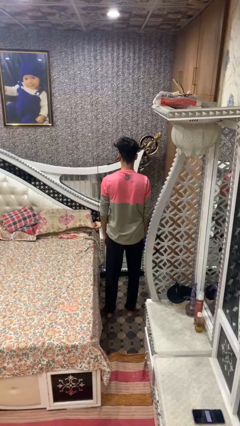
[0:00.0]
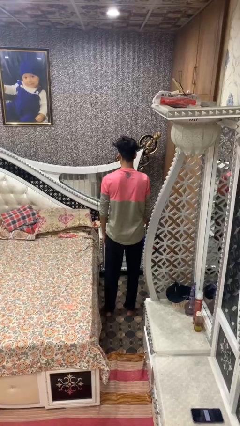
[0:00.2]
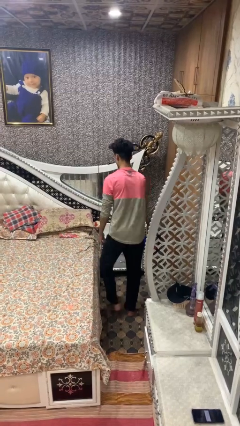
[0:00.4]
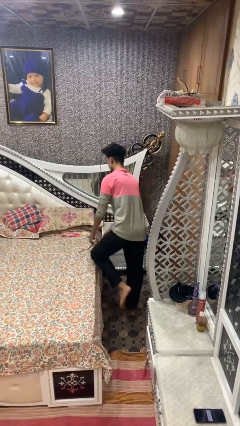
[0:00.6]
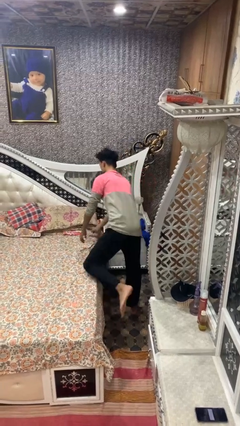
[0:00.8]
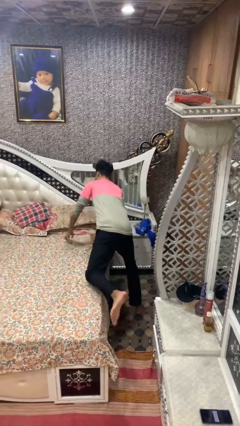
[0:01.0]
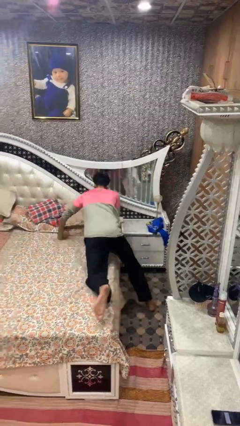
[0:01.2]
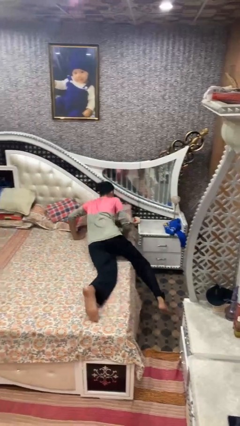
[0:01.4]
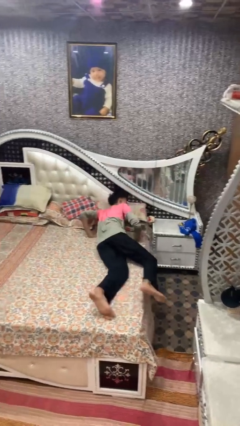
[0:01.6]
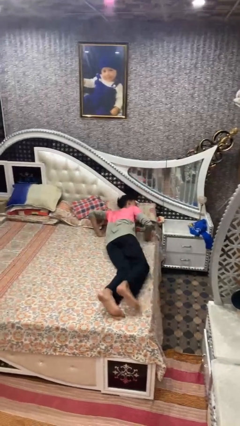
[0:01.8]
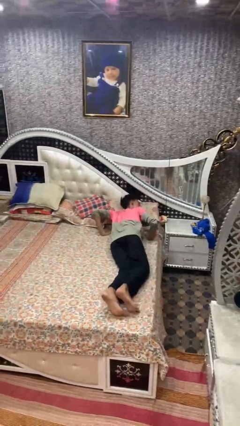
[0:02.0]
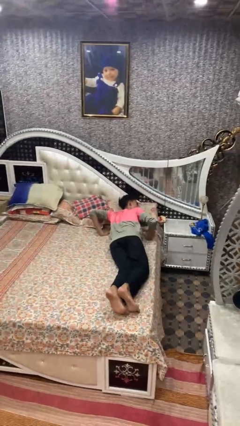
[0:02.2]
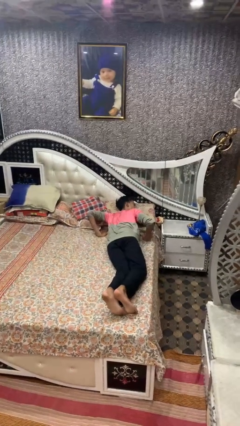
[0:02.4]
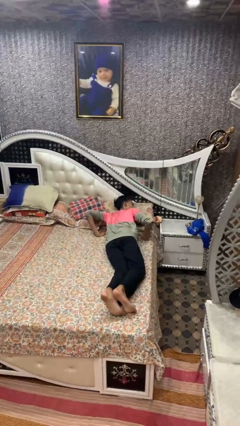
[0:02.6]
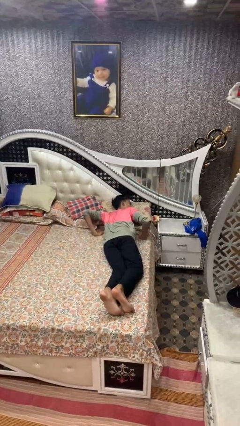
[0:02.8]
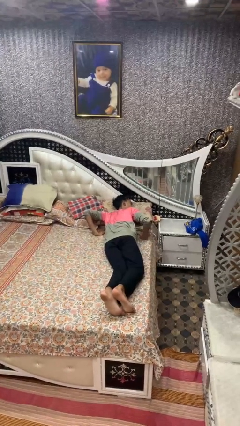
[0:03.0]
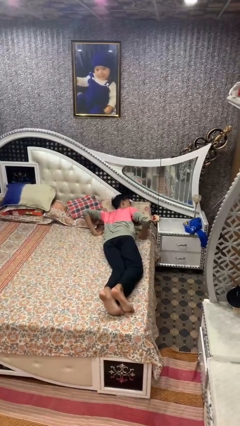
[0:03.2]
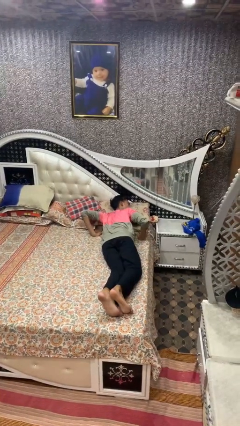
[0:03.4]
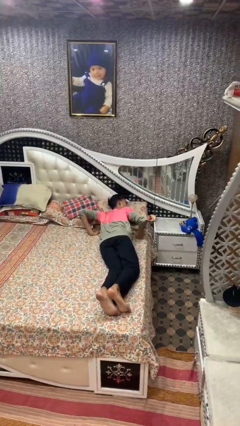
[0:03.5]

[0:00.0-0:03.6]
person lies down on bed

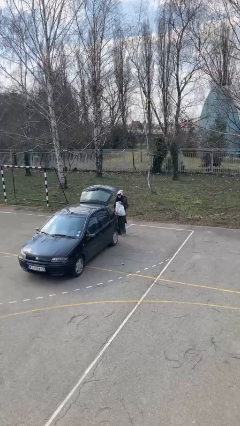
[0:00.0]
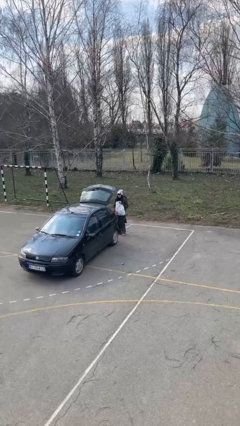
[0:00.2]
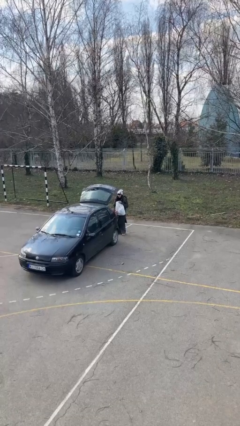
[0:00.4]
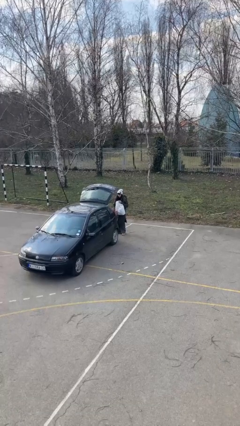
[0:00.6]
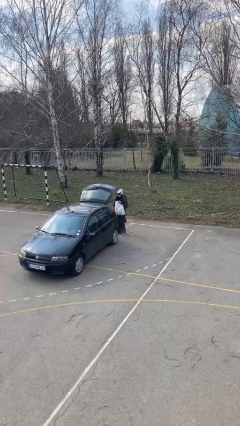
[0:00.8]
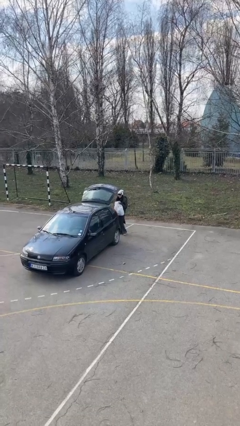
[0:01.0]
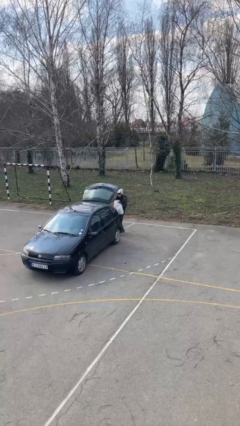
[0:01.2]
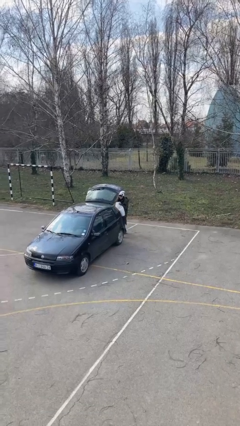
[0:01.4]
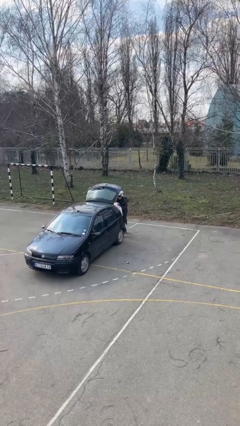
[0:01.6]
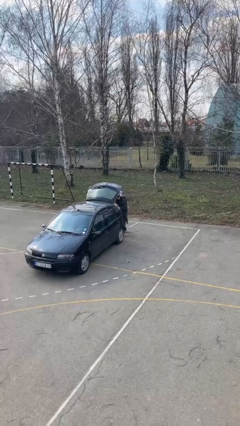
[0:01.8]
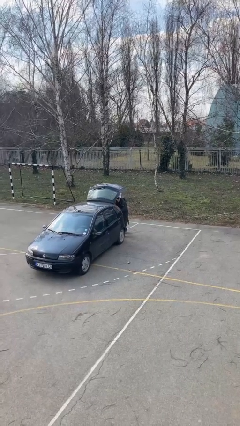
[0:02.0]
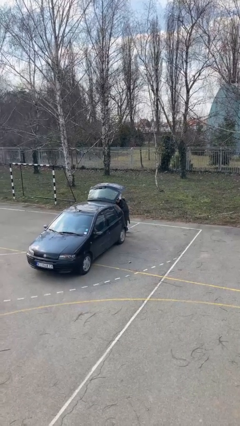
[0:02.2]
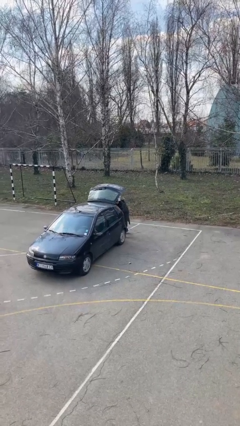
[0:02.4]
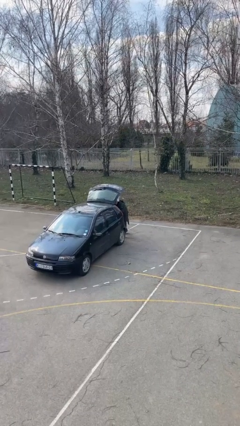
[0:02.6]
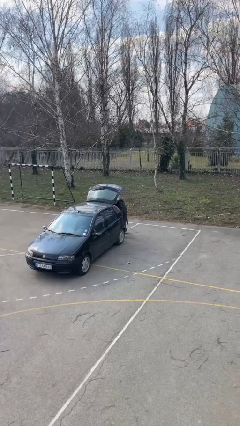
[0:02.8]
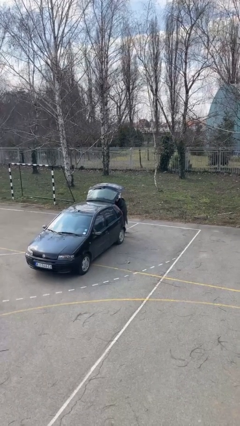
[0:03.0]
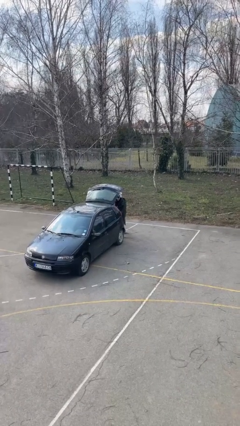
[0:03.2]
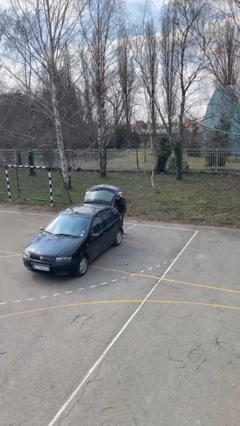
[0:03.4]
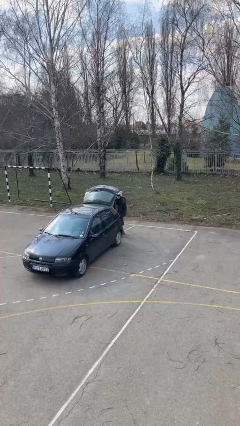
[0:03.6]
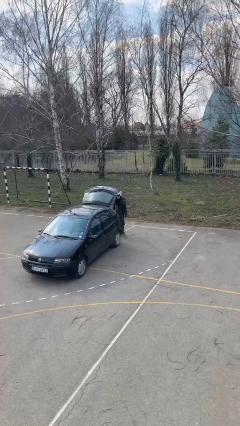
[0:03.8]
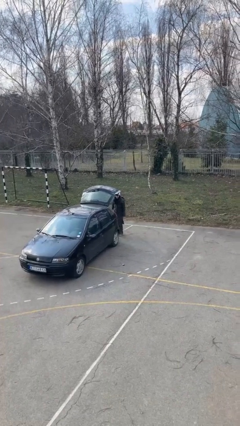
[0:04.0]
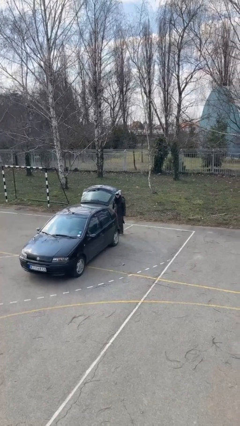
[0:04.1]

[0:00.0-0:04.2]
person loads car

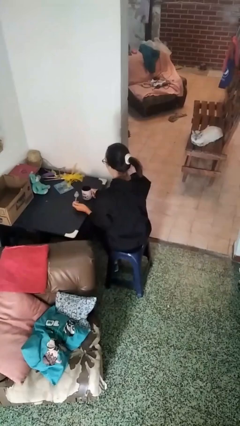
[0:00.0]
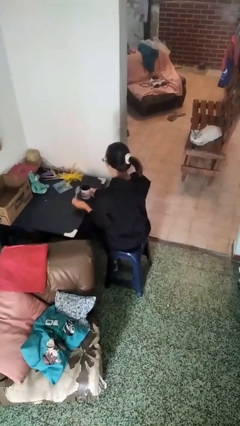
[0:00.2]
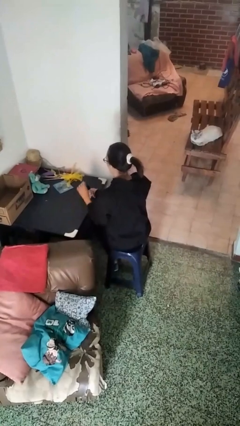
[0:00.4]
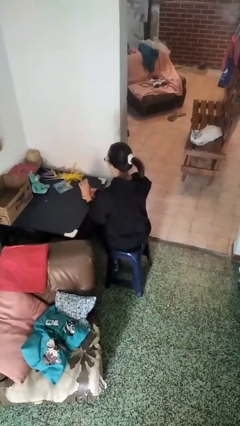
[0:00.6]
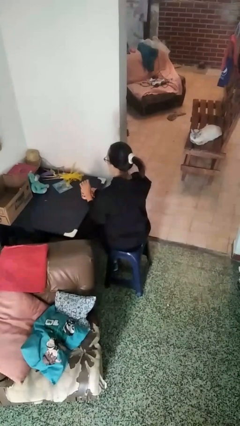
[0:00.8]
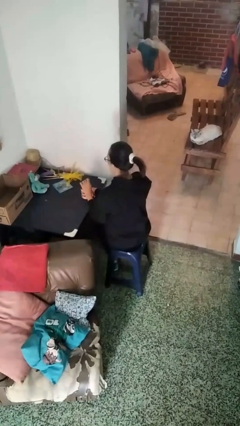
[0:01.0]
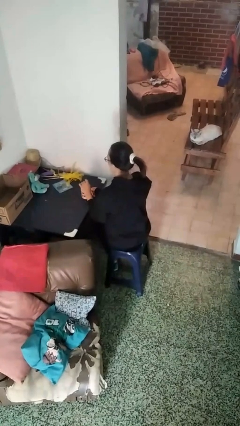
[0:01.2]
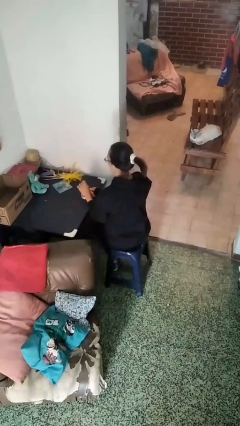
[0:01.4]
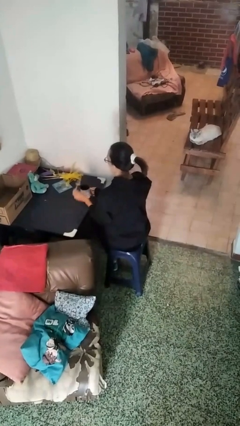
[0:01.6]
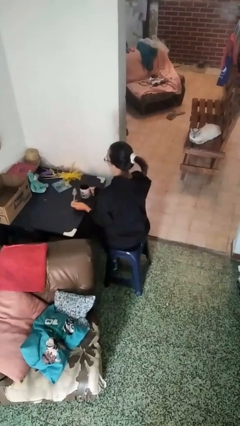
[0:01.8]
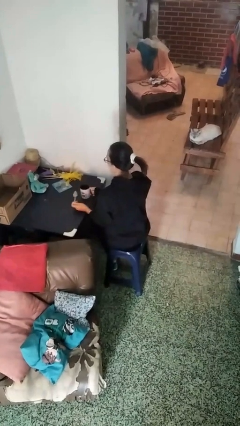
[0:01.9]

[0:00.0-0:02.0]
person stirs mug

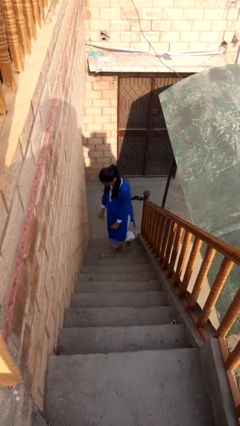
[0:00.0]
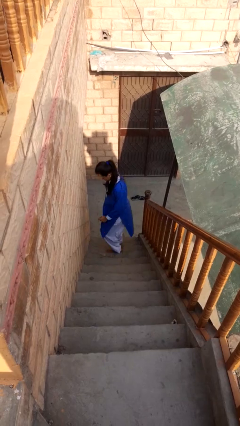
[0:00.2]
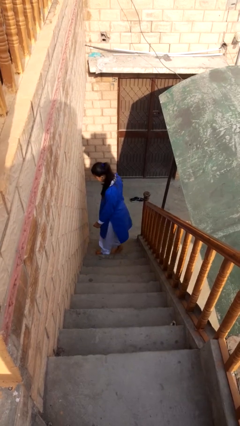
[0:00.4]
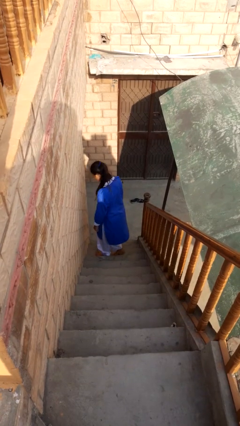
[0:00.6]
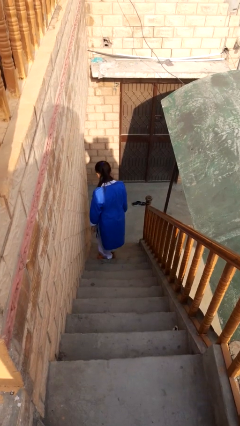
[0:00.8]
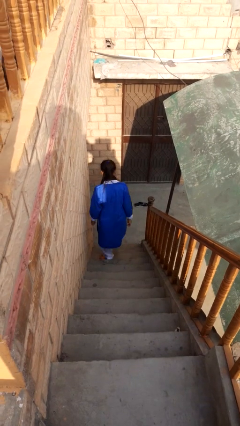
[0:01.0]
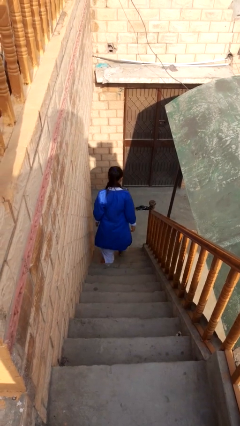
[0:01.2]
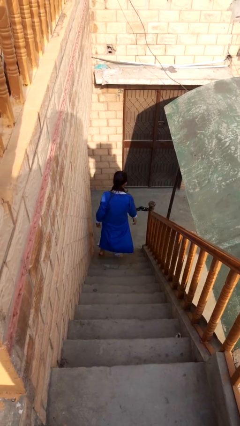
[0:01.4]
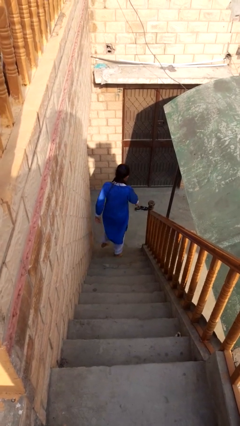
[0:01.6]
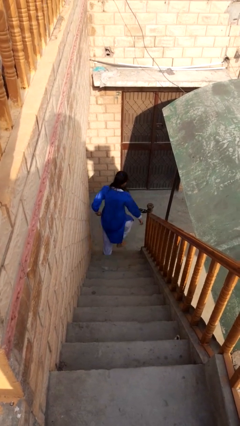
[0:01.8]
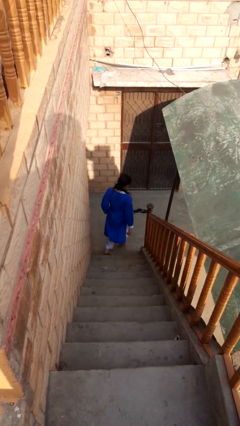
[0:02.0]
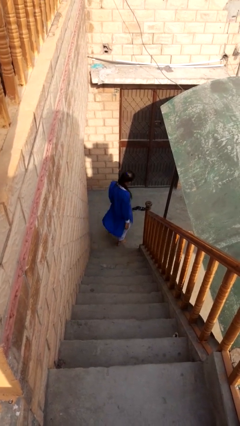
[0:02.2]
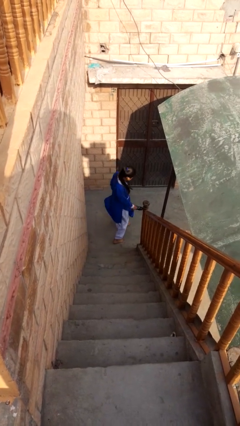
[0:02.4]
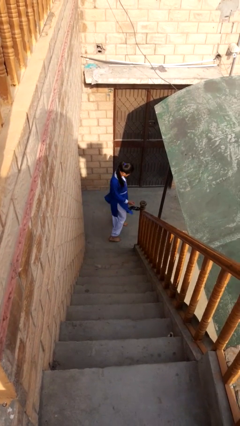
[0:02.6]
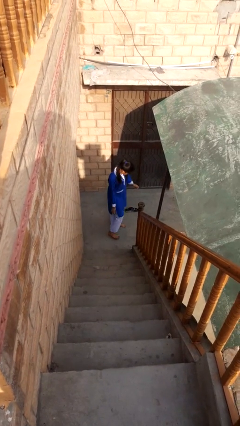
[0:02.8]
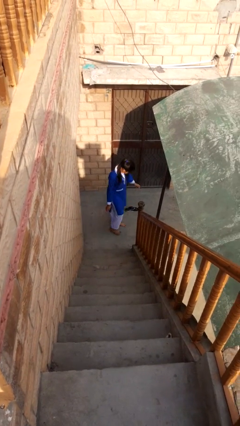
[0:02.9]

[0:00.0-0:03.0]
person climbs down stairs

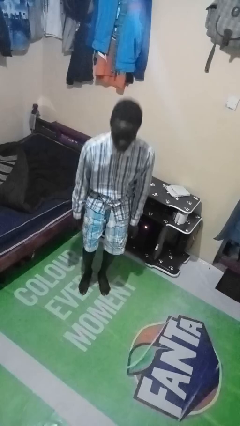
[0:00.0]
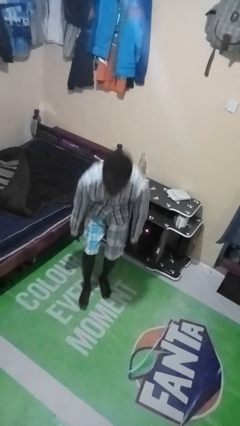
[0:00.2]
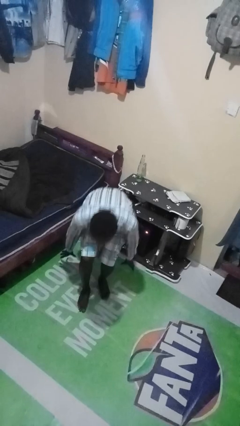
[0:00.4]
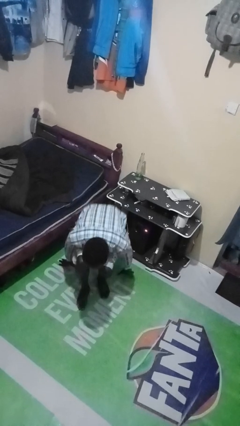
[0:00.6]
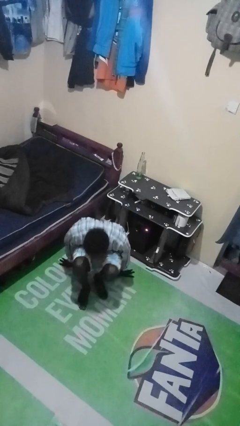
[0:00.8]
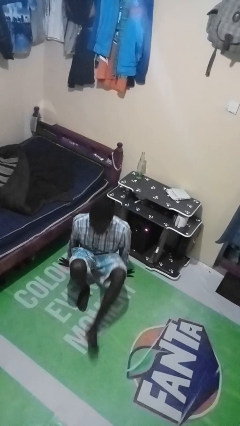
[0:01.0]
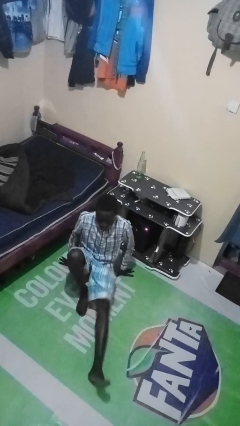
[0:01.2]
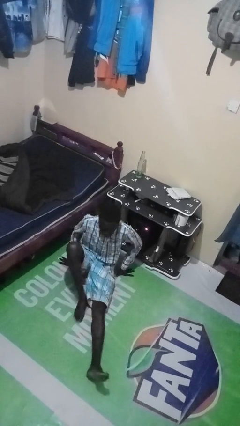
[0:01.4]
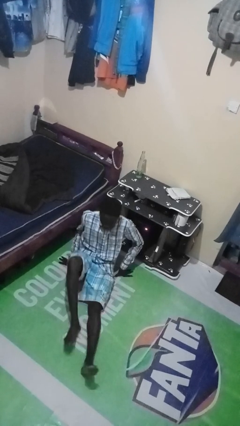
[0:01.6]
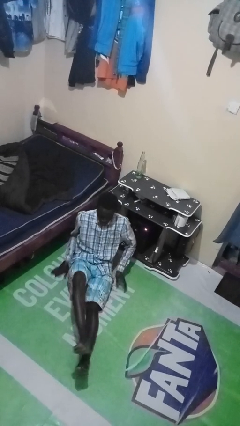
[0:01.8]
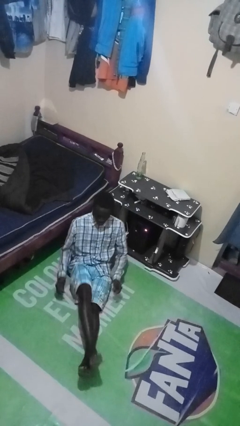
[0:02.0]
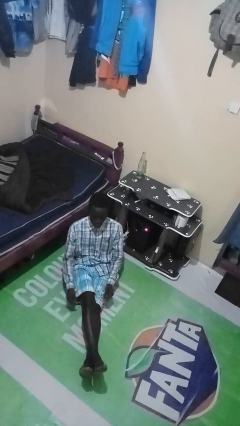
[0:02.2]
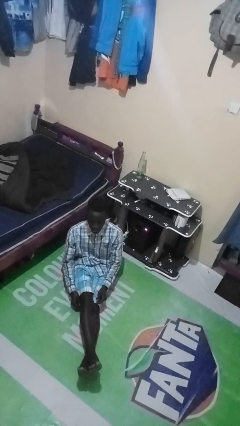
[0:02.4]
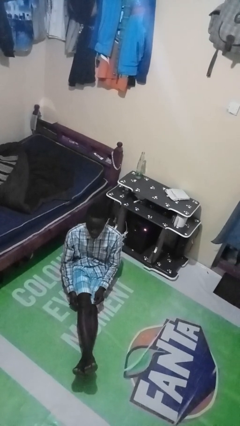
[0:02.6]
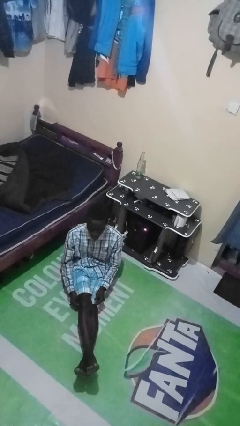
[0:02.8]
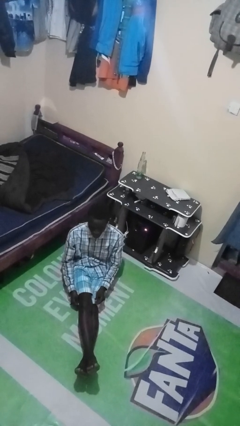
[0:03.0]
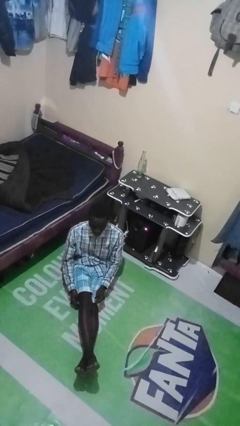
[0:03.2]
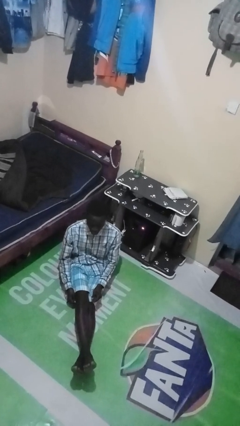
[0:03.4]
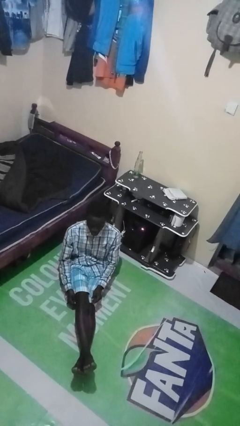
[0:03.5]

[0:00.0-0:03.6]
person sits crisscross

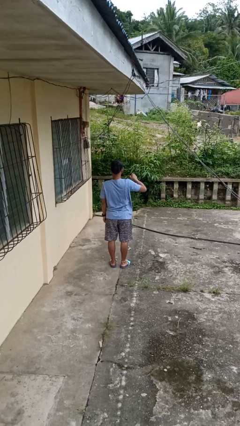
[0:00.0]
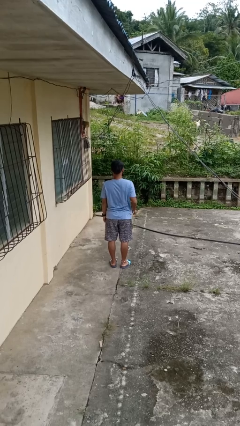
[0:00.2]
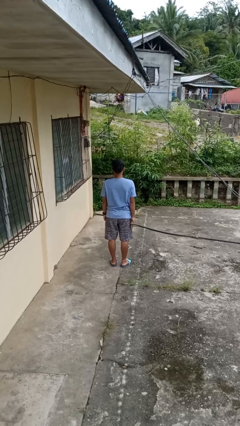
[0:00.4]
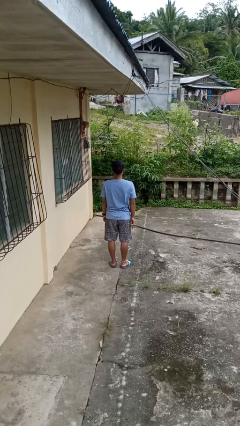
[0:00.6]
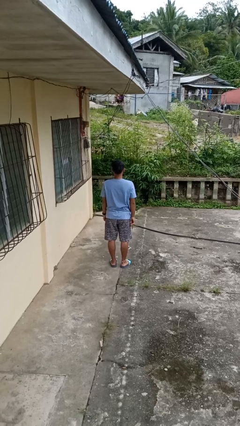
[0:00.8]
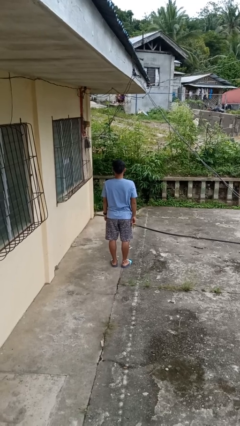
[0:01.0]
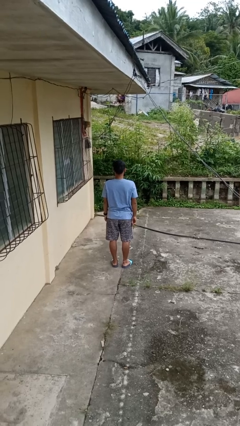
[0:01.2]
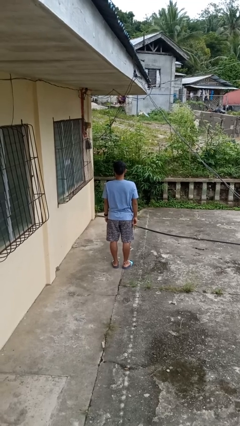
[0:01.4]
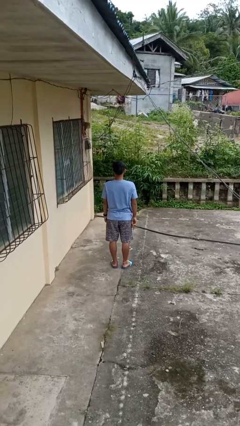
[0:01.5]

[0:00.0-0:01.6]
person gestures lower hand
